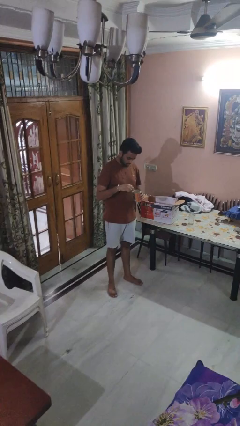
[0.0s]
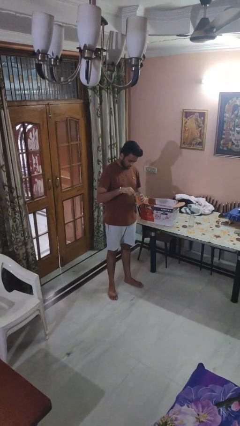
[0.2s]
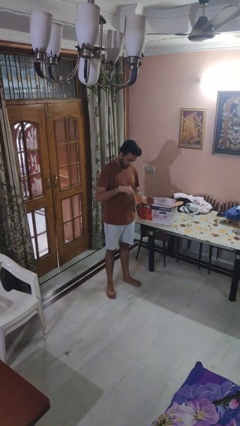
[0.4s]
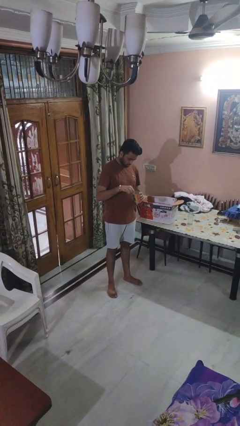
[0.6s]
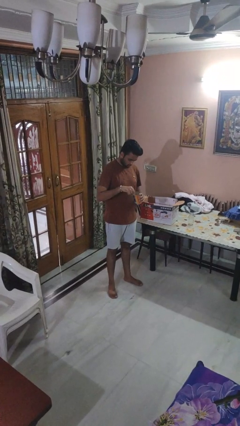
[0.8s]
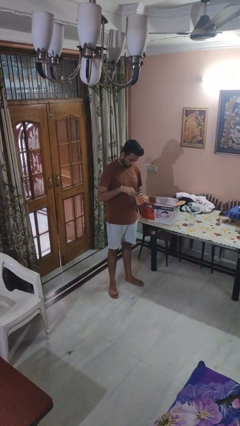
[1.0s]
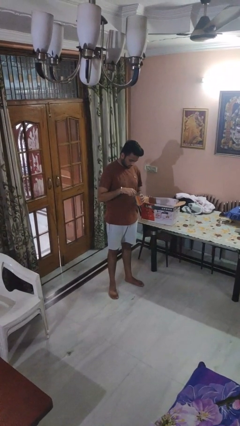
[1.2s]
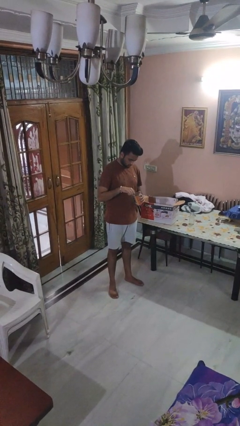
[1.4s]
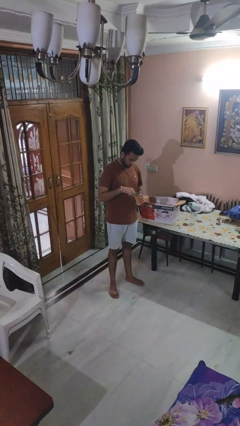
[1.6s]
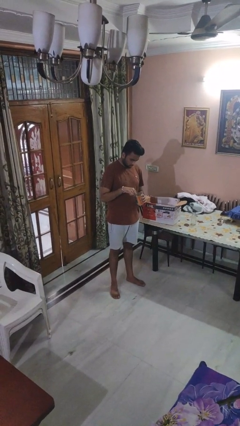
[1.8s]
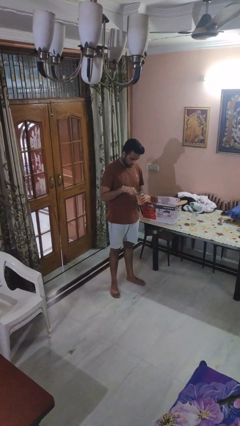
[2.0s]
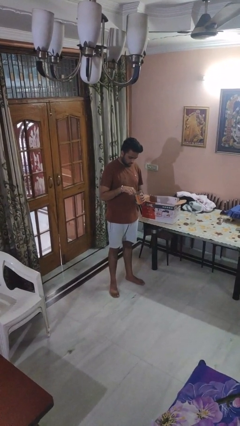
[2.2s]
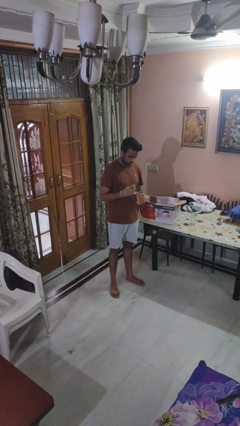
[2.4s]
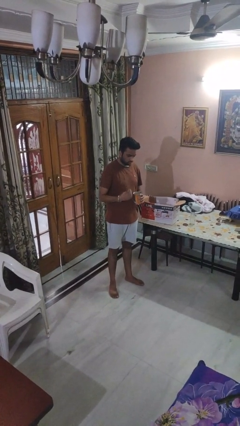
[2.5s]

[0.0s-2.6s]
person opens can with can opener

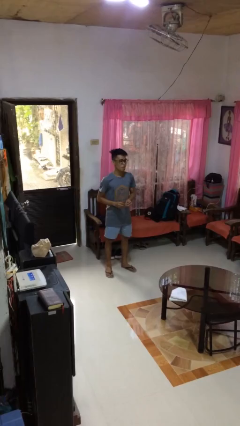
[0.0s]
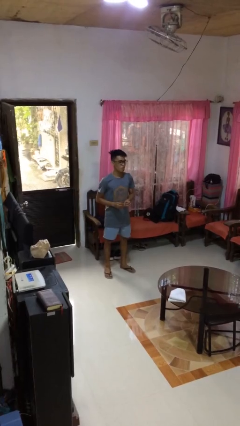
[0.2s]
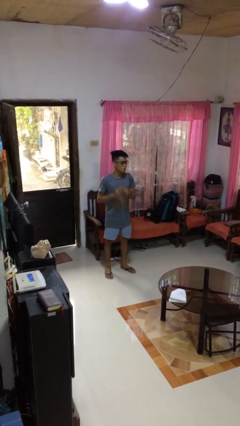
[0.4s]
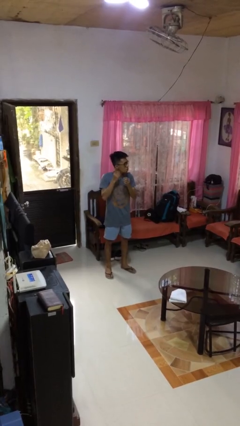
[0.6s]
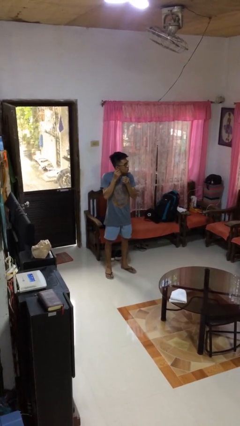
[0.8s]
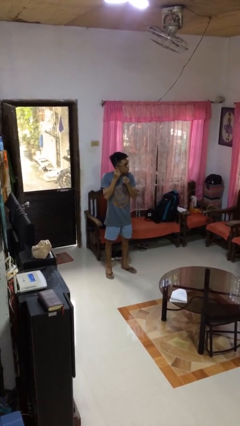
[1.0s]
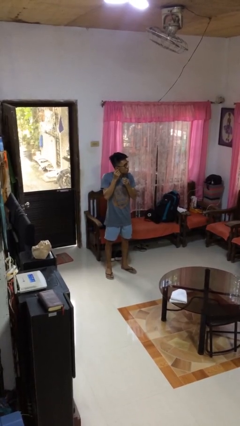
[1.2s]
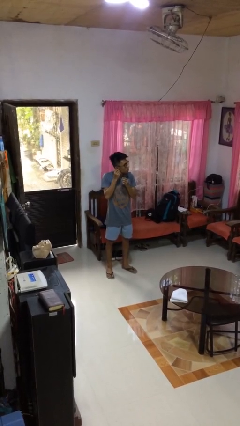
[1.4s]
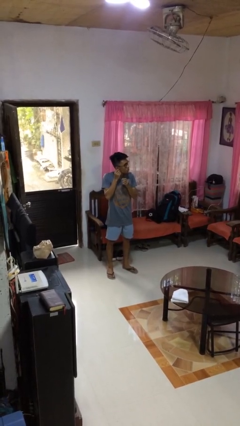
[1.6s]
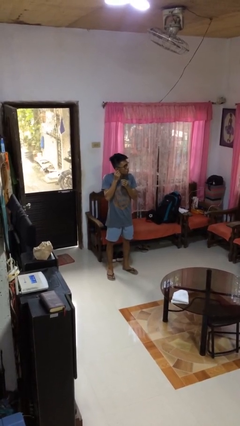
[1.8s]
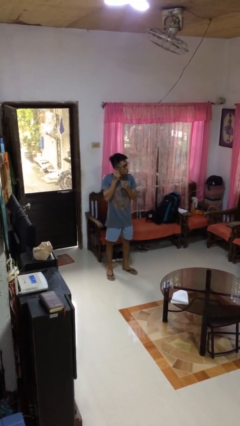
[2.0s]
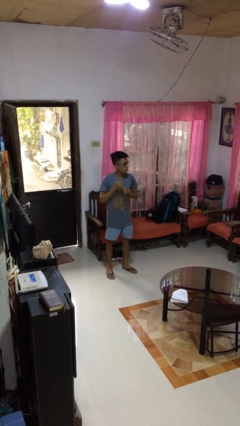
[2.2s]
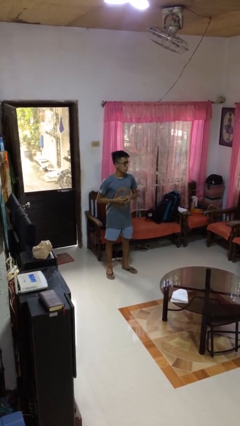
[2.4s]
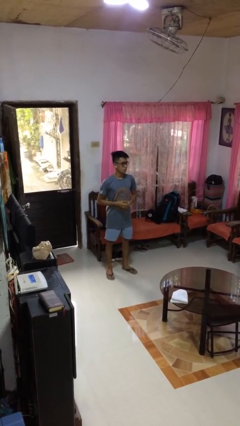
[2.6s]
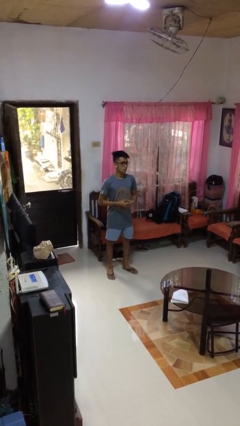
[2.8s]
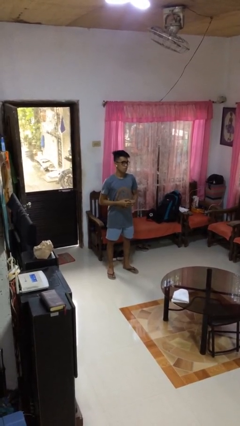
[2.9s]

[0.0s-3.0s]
person puts on earrings

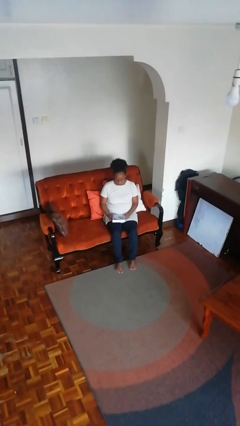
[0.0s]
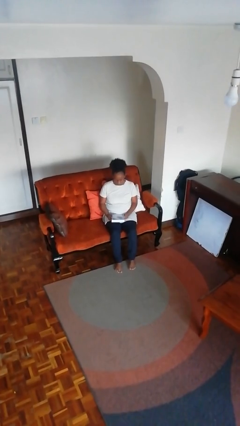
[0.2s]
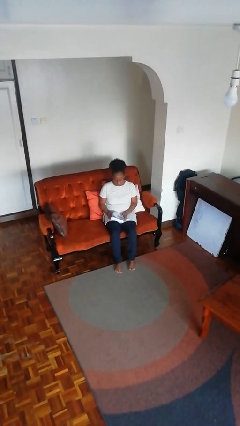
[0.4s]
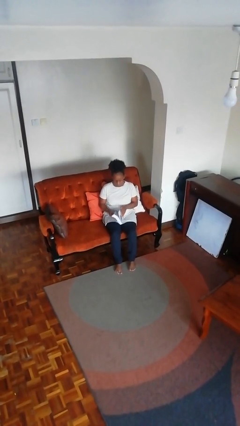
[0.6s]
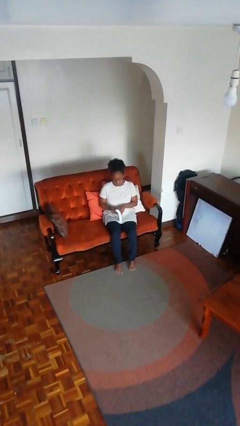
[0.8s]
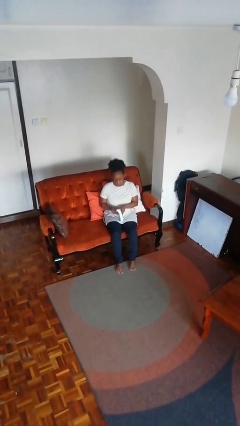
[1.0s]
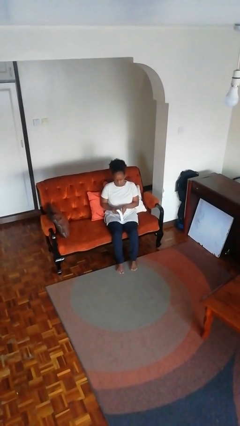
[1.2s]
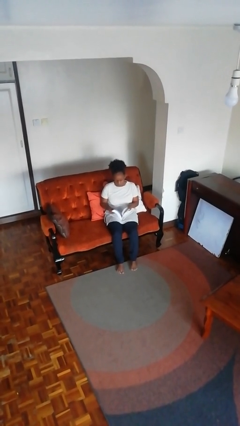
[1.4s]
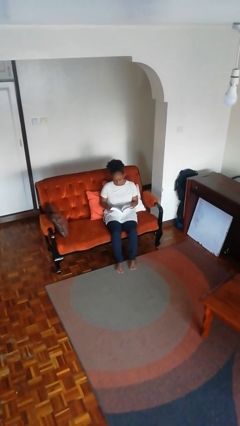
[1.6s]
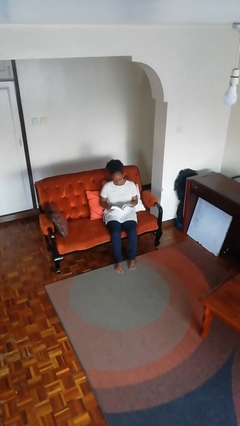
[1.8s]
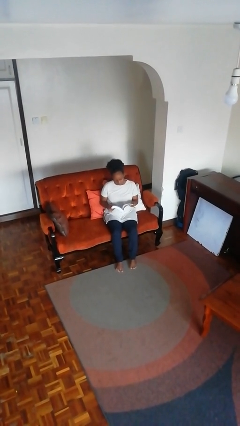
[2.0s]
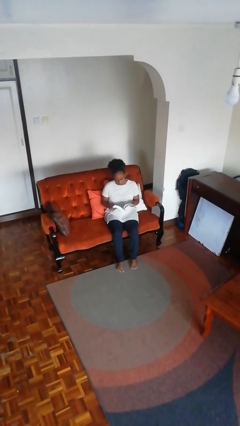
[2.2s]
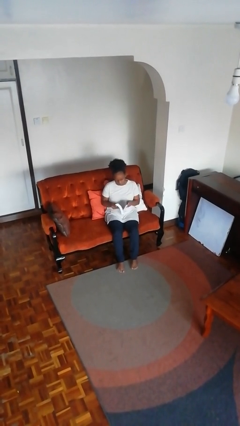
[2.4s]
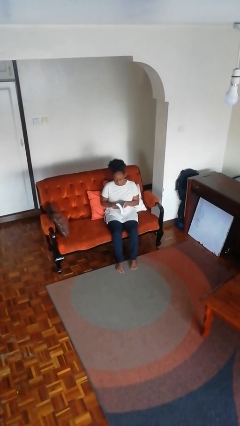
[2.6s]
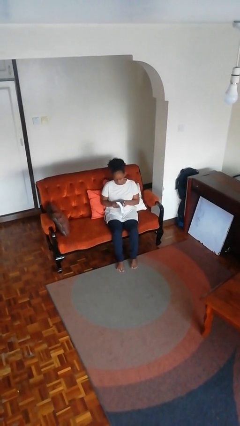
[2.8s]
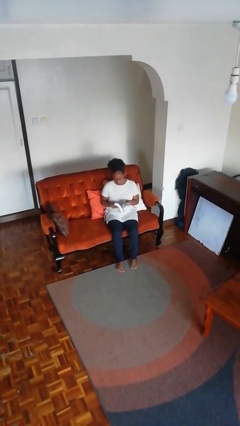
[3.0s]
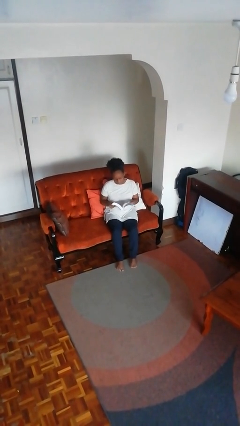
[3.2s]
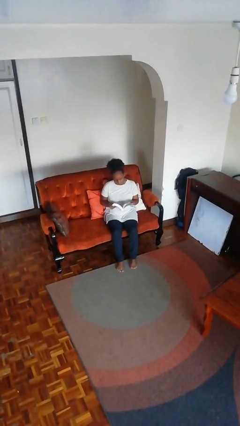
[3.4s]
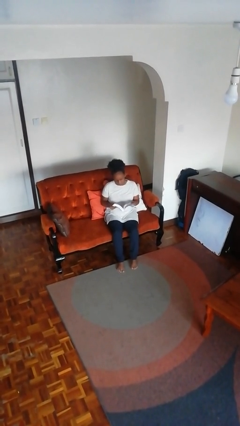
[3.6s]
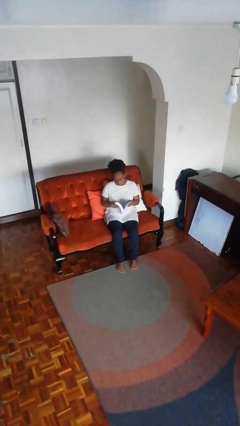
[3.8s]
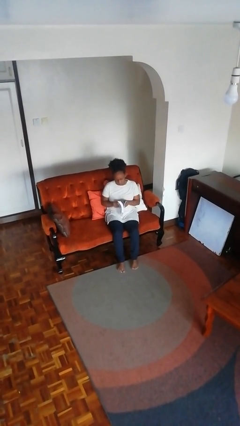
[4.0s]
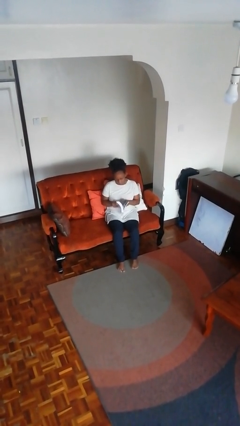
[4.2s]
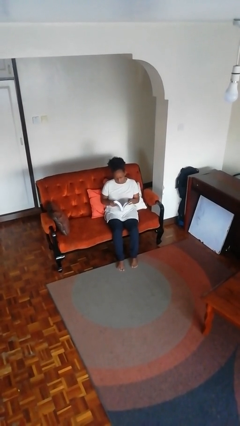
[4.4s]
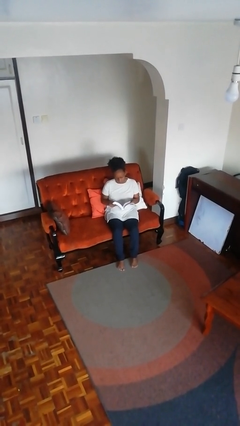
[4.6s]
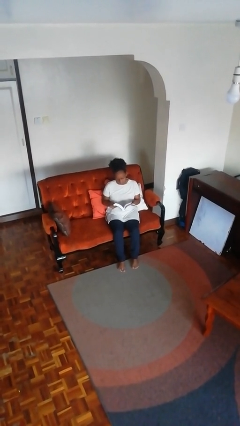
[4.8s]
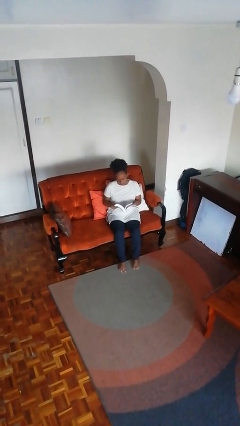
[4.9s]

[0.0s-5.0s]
person reads book

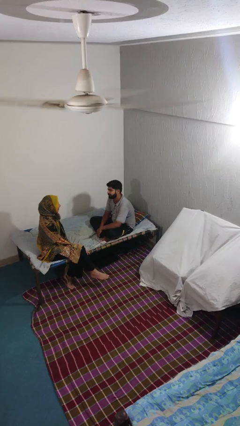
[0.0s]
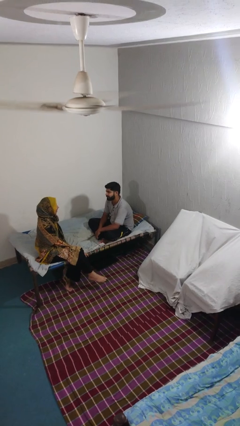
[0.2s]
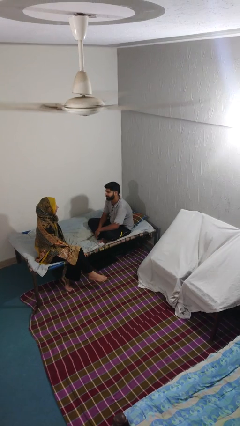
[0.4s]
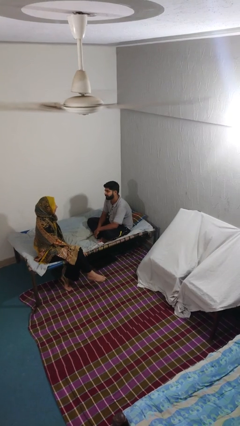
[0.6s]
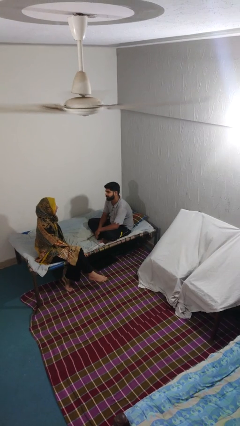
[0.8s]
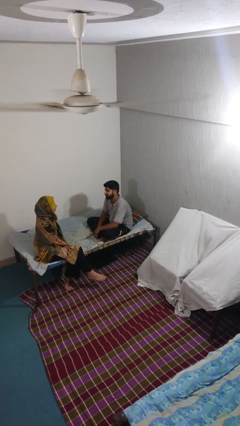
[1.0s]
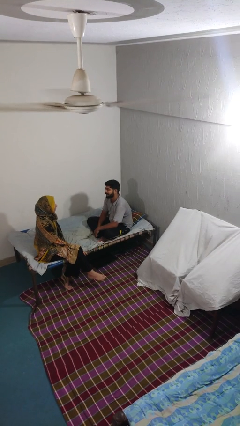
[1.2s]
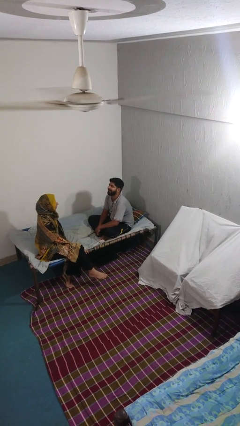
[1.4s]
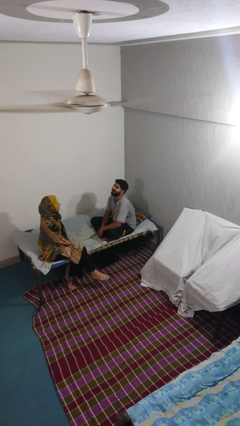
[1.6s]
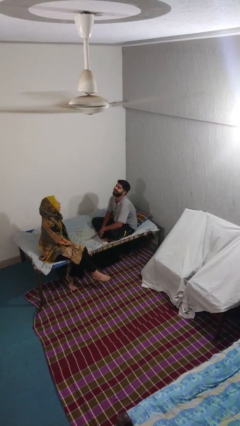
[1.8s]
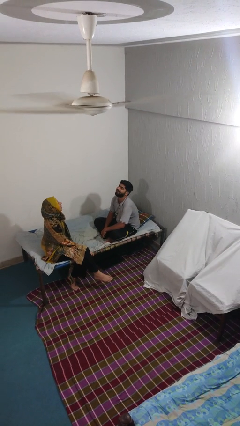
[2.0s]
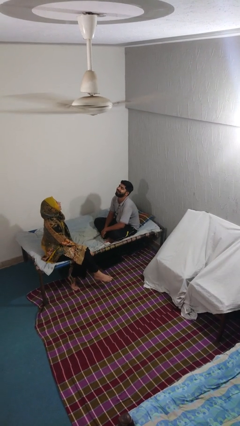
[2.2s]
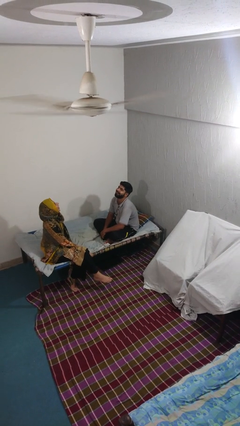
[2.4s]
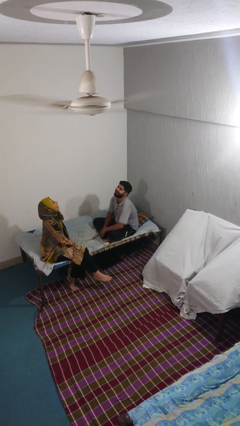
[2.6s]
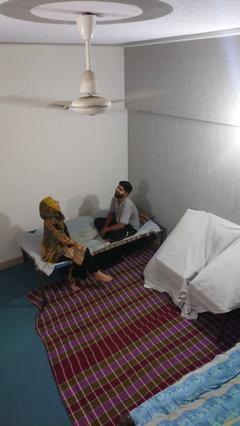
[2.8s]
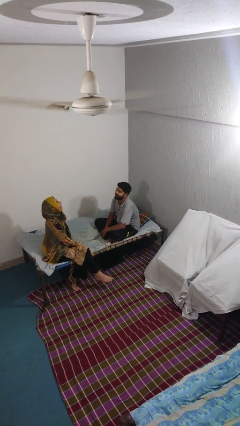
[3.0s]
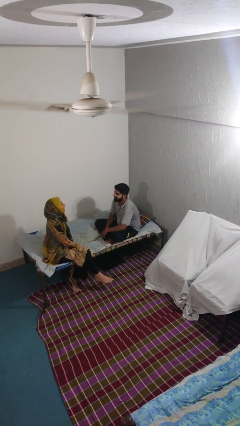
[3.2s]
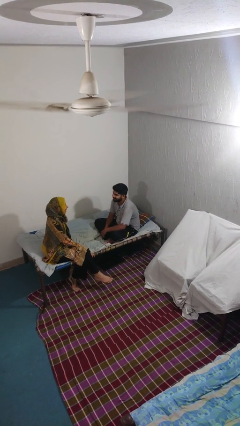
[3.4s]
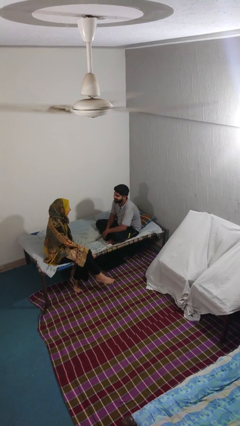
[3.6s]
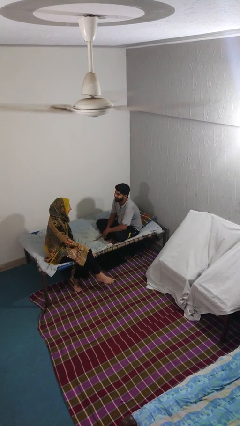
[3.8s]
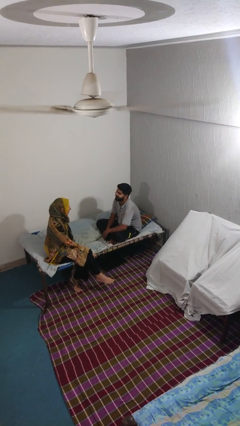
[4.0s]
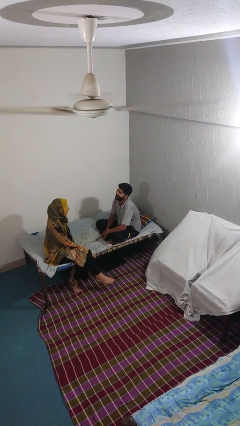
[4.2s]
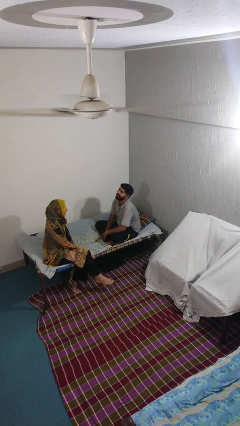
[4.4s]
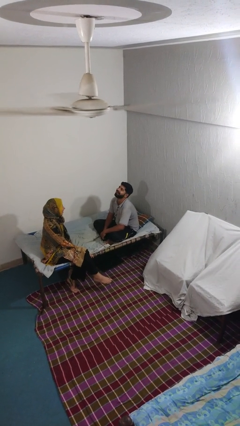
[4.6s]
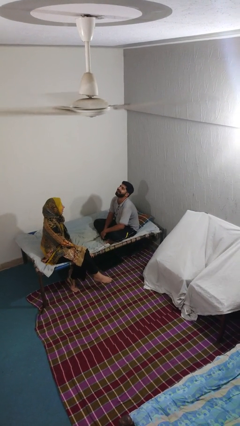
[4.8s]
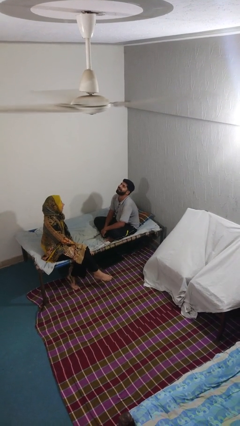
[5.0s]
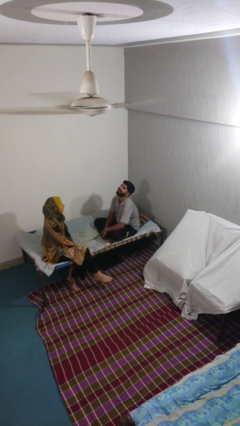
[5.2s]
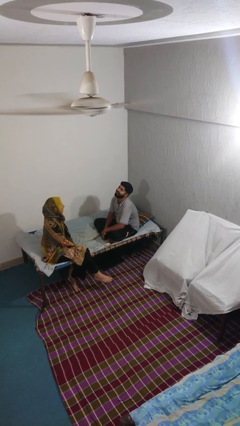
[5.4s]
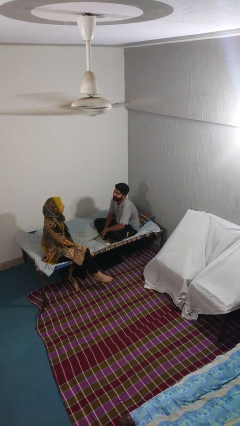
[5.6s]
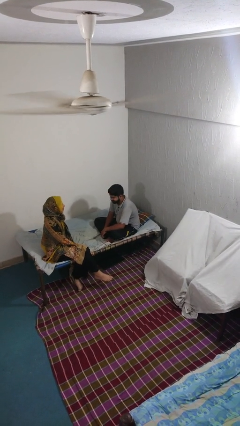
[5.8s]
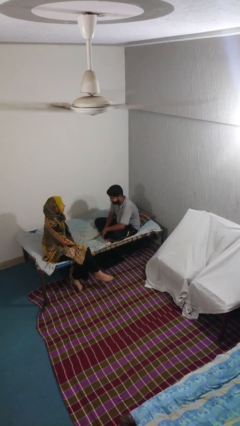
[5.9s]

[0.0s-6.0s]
person laughs with person

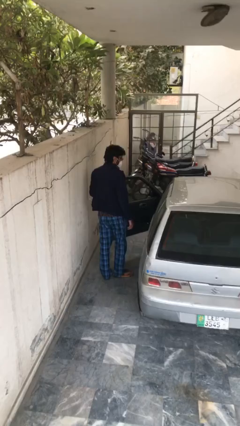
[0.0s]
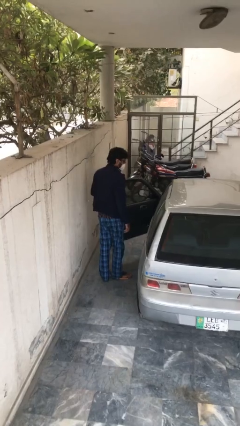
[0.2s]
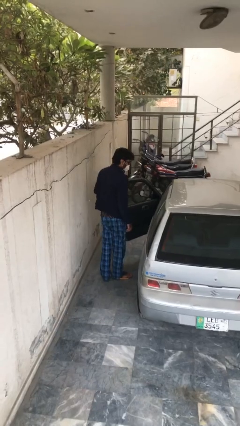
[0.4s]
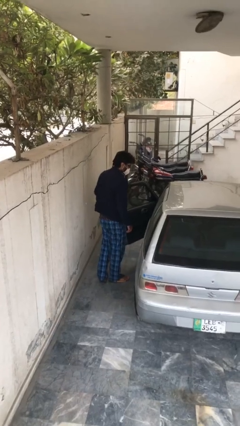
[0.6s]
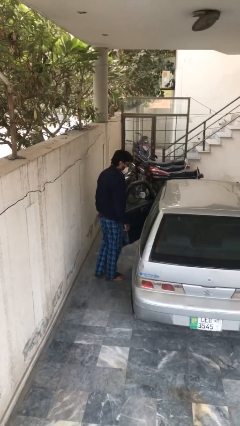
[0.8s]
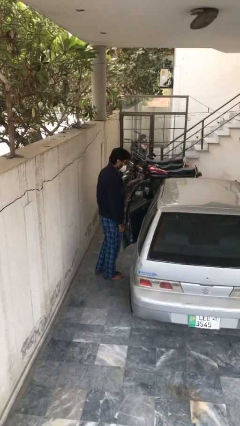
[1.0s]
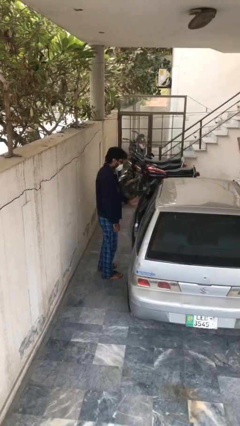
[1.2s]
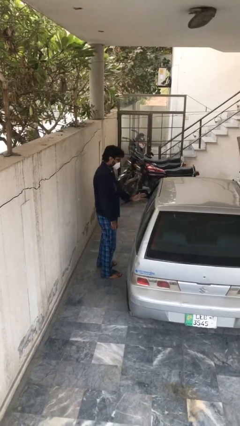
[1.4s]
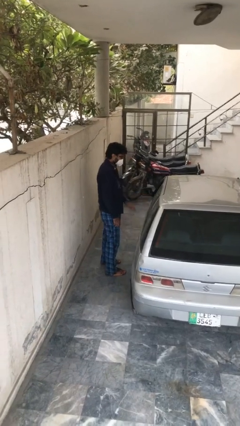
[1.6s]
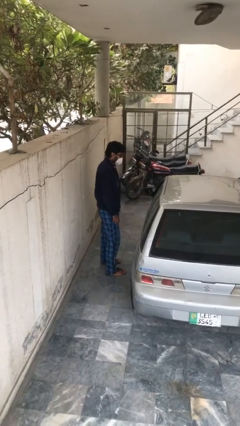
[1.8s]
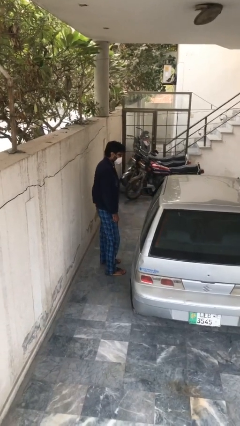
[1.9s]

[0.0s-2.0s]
person closes car door
